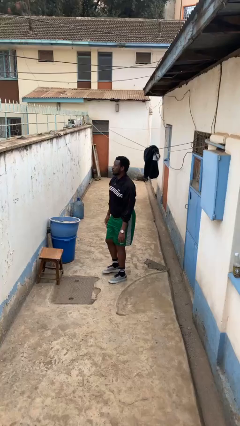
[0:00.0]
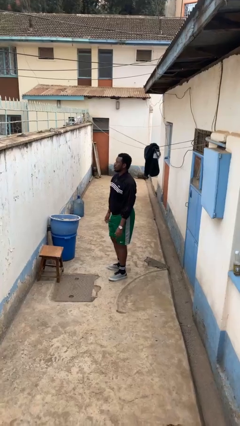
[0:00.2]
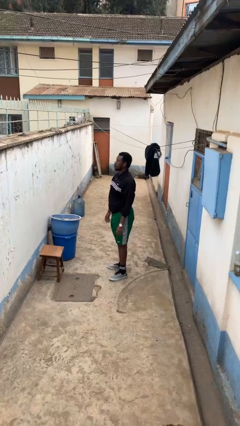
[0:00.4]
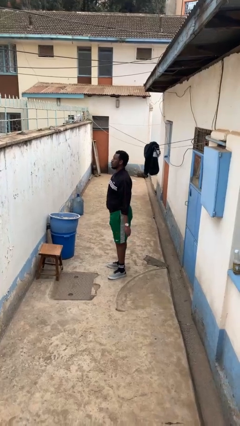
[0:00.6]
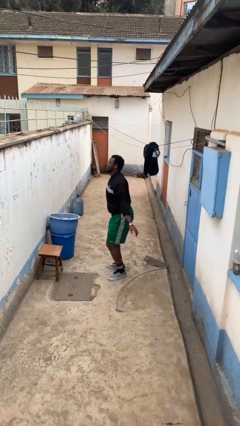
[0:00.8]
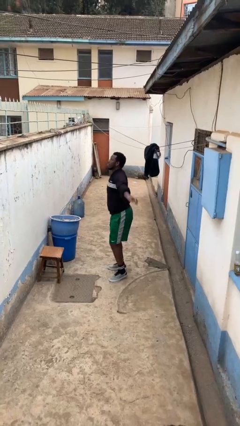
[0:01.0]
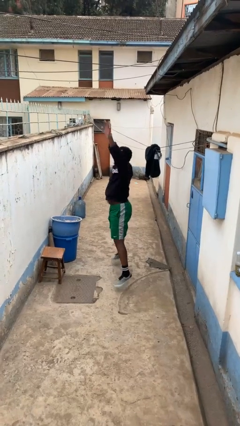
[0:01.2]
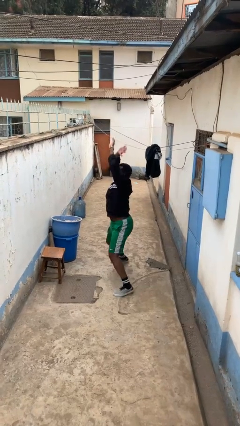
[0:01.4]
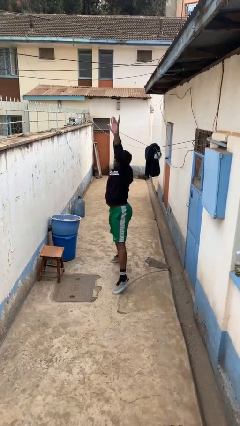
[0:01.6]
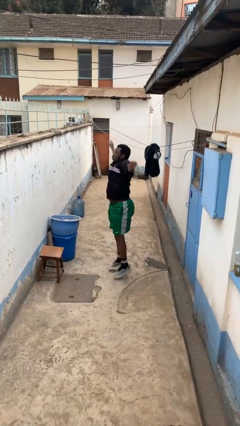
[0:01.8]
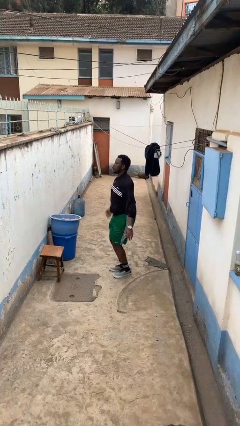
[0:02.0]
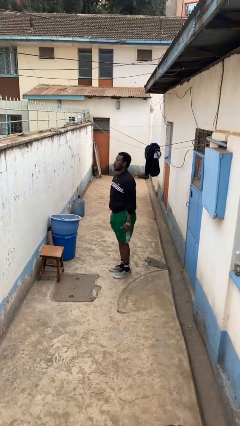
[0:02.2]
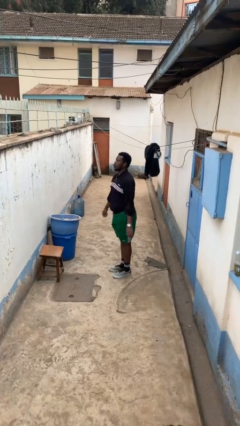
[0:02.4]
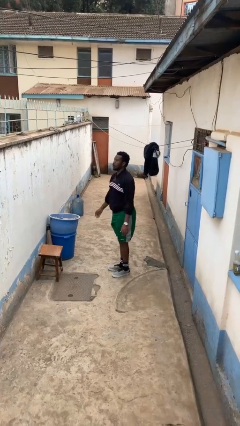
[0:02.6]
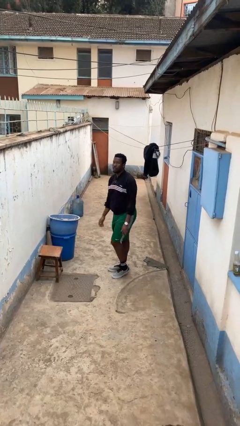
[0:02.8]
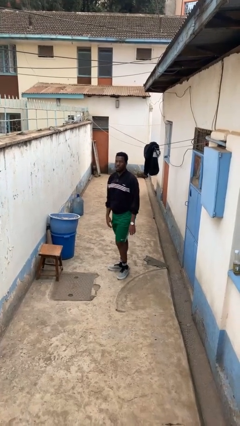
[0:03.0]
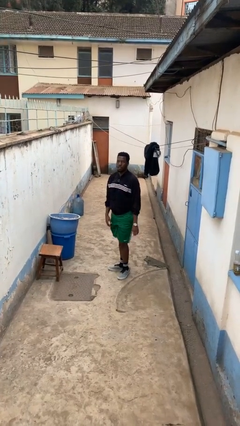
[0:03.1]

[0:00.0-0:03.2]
person exercises with jumping jacks

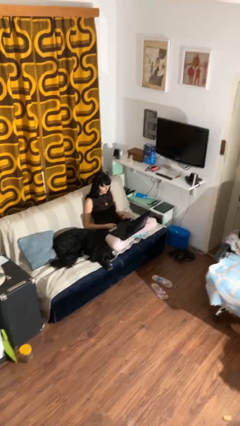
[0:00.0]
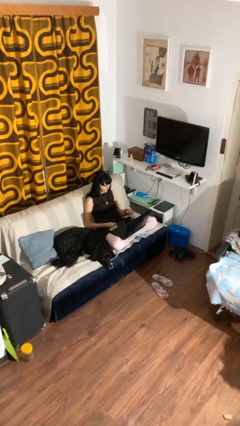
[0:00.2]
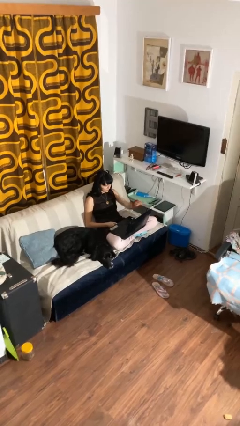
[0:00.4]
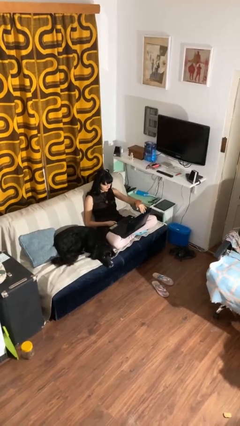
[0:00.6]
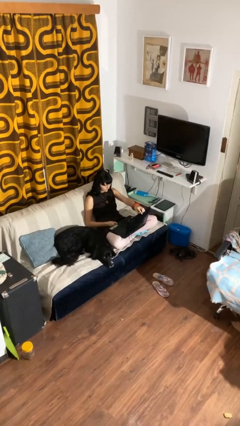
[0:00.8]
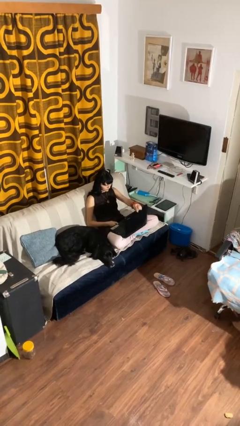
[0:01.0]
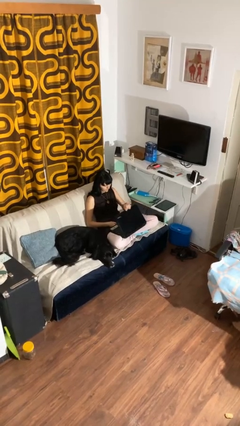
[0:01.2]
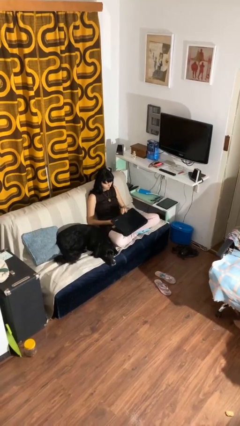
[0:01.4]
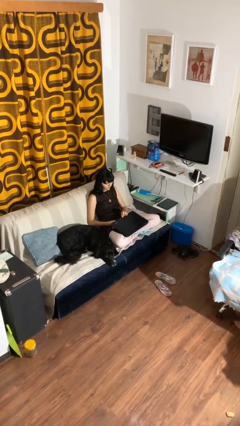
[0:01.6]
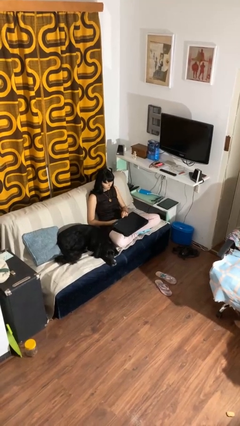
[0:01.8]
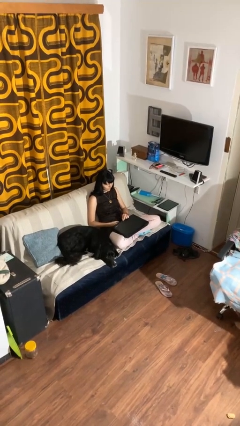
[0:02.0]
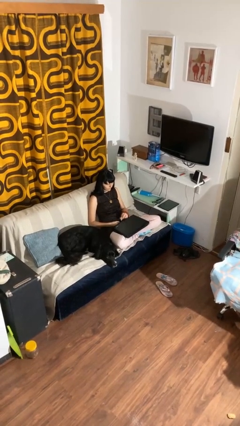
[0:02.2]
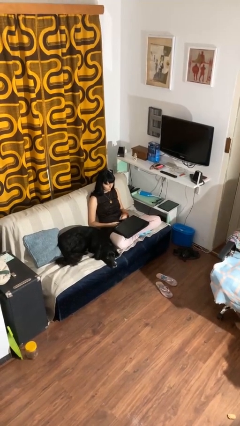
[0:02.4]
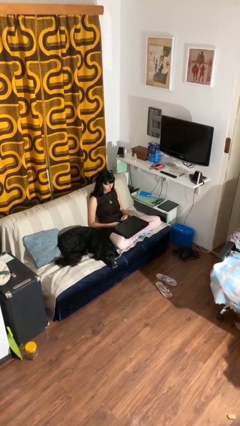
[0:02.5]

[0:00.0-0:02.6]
person closes laptop

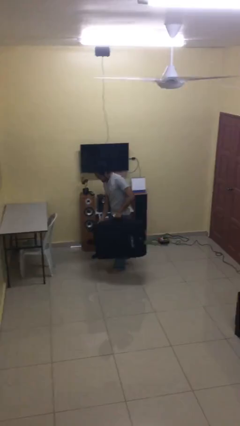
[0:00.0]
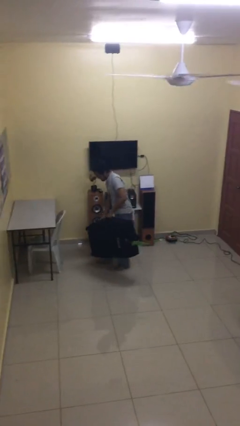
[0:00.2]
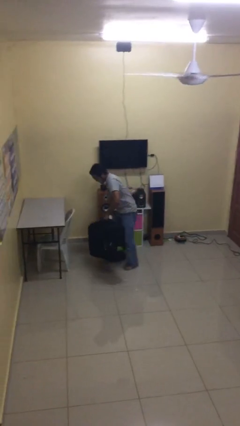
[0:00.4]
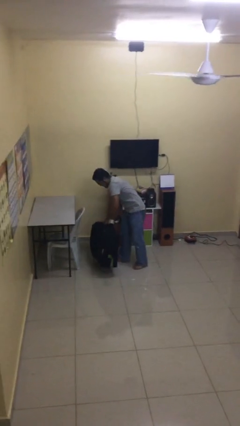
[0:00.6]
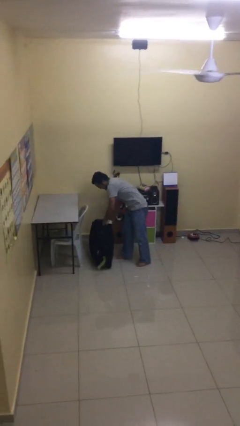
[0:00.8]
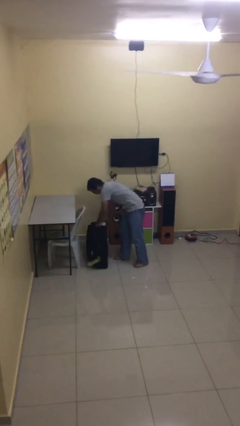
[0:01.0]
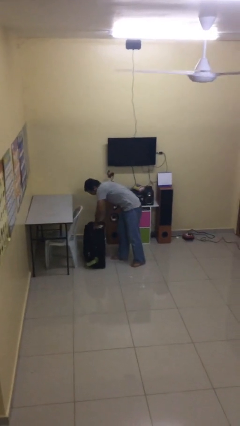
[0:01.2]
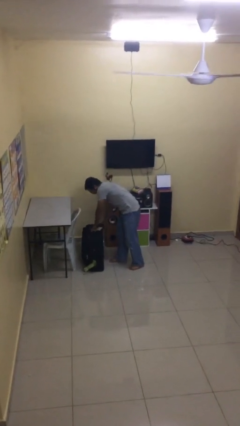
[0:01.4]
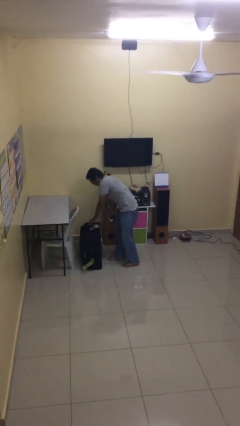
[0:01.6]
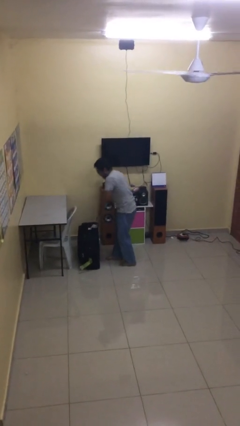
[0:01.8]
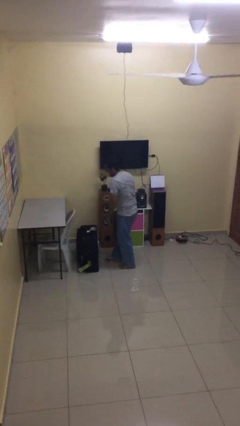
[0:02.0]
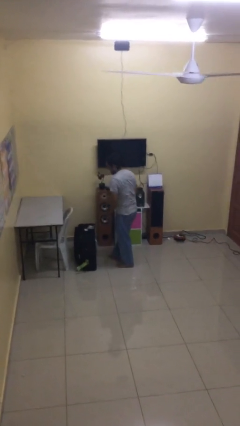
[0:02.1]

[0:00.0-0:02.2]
person puts down object on floor

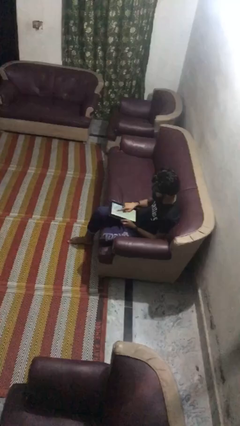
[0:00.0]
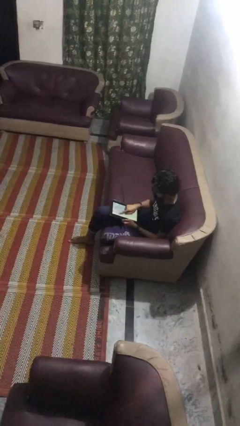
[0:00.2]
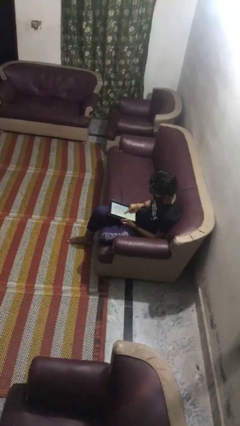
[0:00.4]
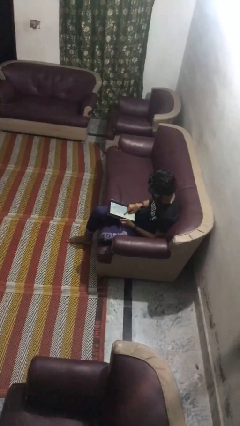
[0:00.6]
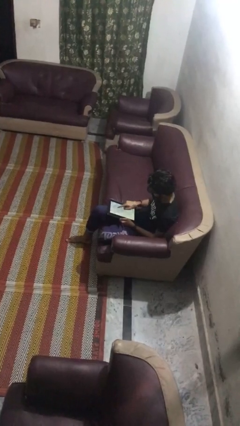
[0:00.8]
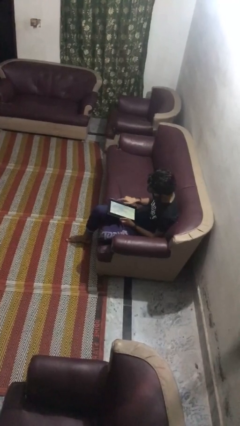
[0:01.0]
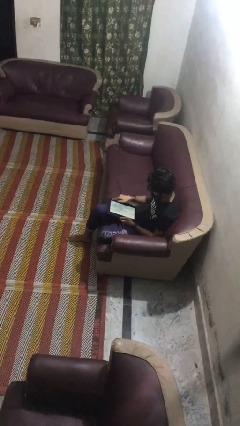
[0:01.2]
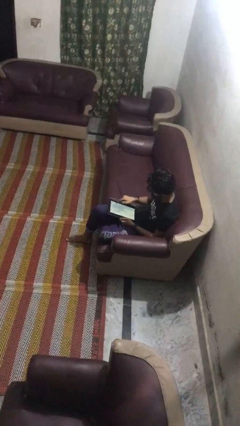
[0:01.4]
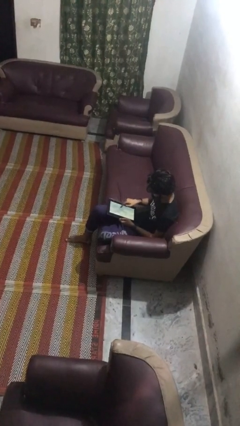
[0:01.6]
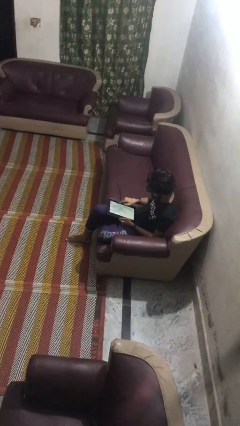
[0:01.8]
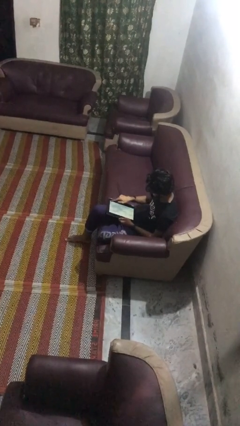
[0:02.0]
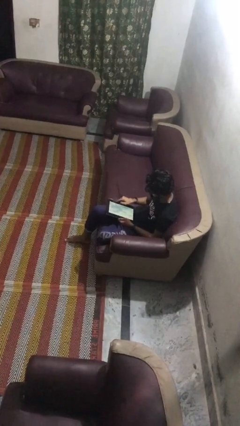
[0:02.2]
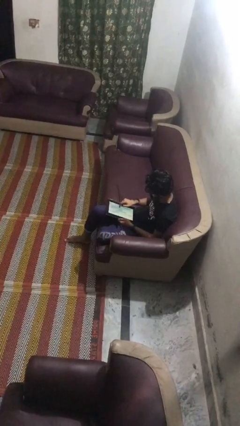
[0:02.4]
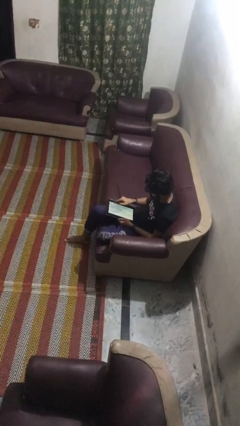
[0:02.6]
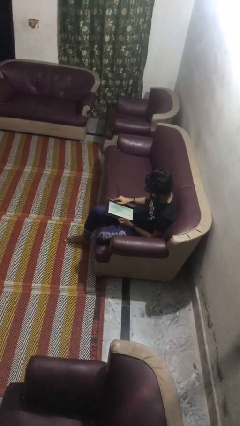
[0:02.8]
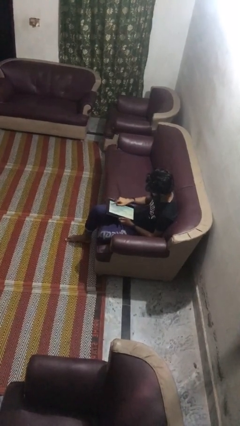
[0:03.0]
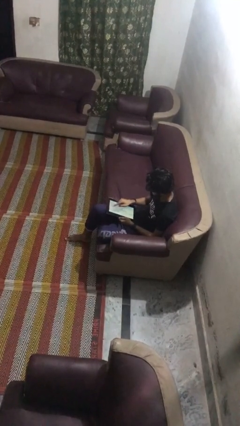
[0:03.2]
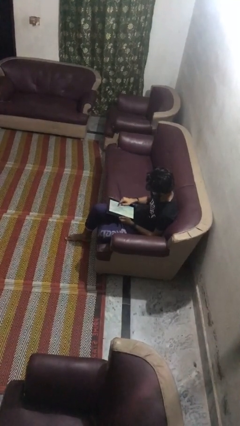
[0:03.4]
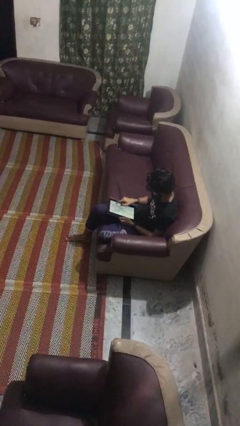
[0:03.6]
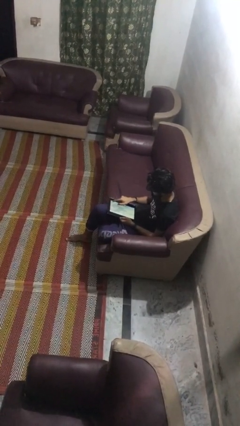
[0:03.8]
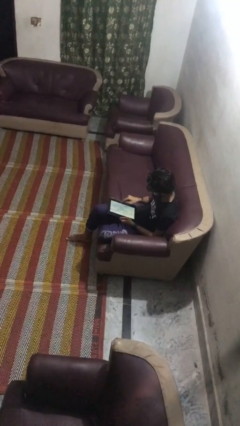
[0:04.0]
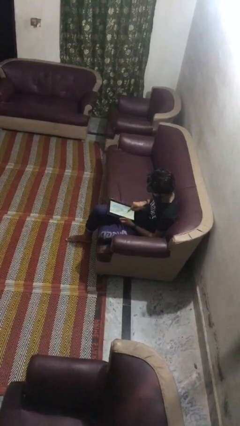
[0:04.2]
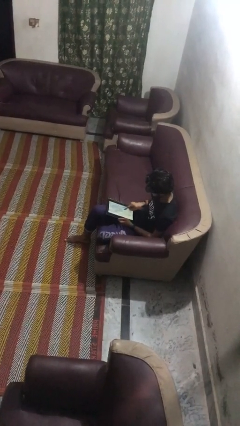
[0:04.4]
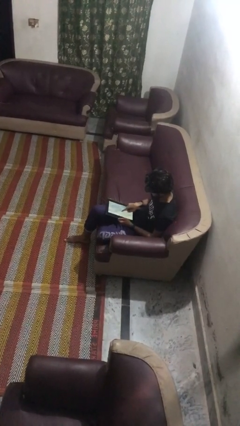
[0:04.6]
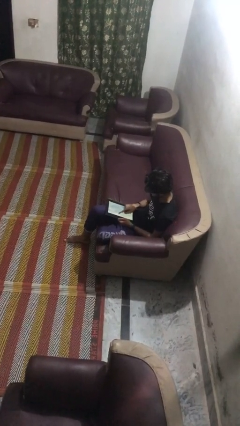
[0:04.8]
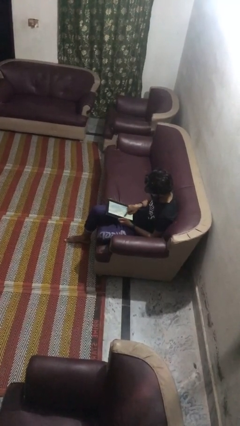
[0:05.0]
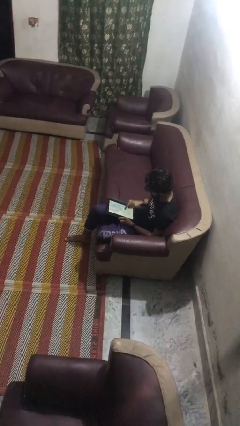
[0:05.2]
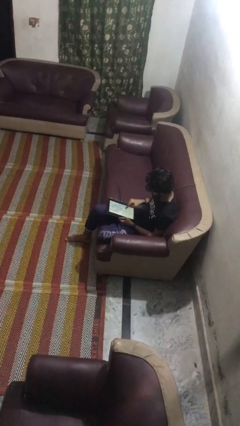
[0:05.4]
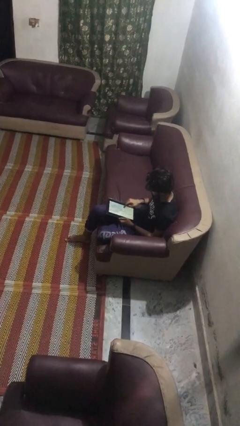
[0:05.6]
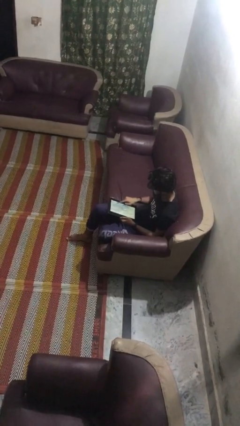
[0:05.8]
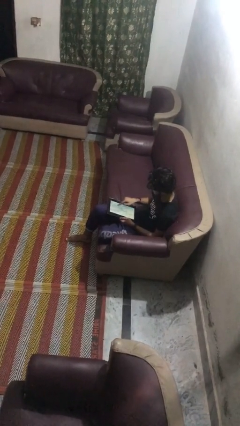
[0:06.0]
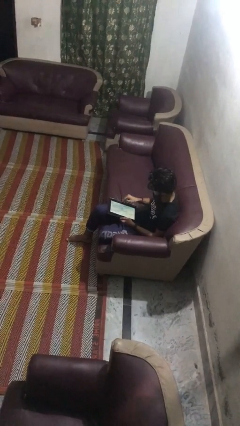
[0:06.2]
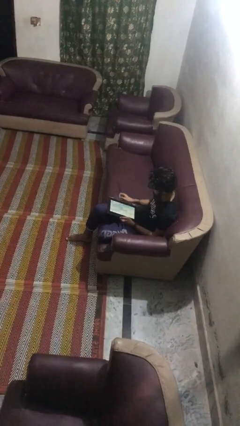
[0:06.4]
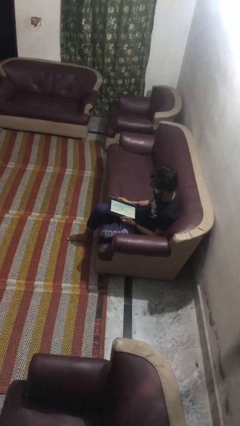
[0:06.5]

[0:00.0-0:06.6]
person interacts with tablet

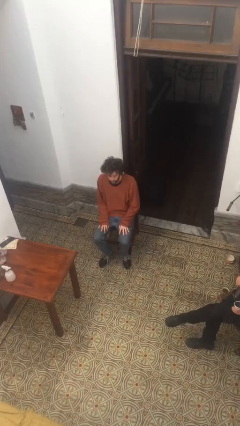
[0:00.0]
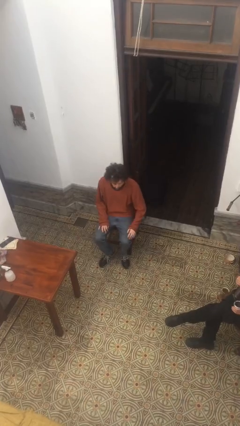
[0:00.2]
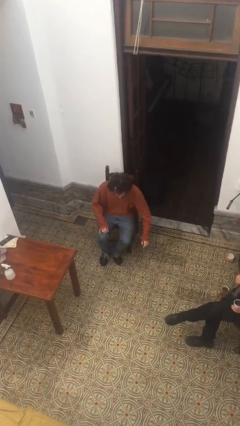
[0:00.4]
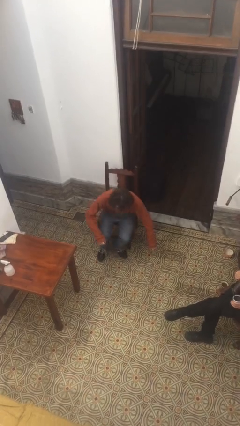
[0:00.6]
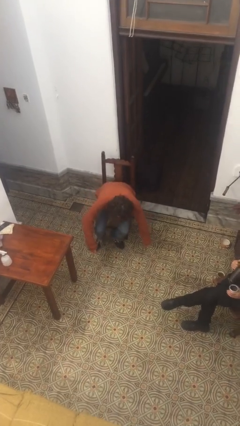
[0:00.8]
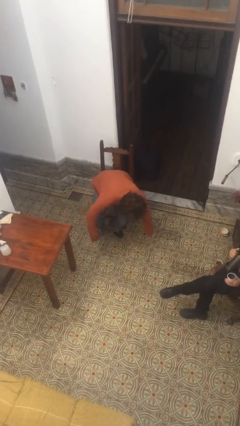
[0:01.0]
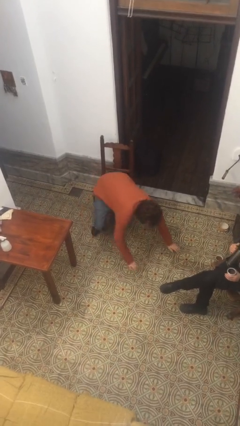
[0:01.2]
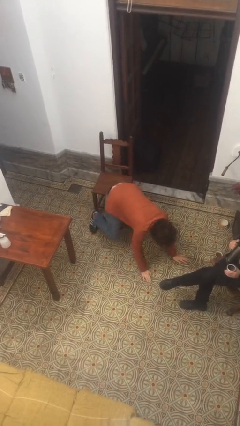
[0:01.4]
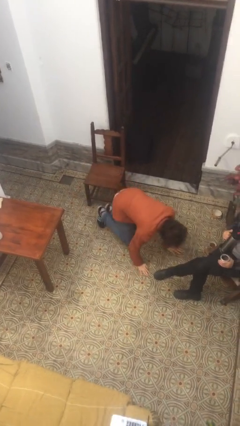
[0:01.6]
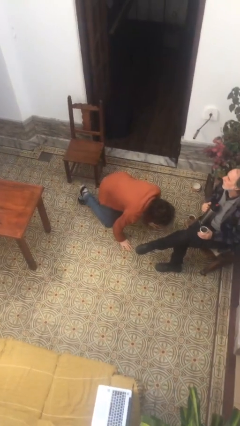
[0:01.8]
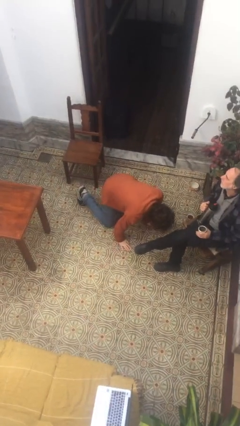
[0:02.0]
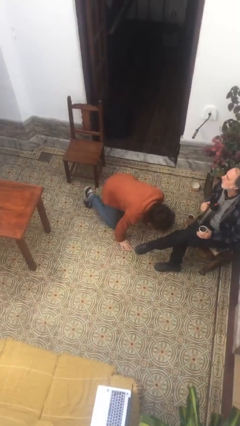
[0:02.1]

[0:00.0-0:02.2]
person falls from chair

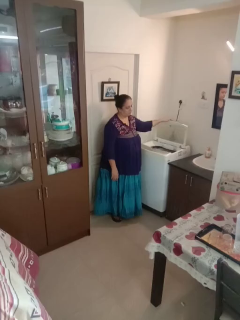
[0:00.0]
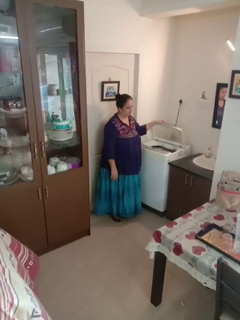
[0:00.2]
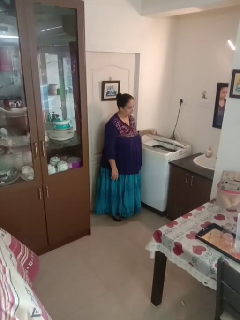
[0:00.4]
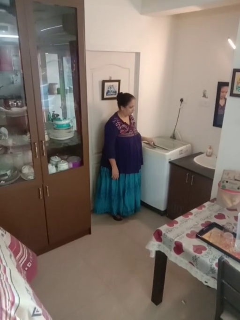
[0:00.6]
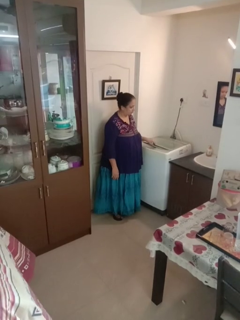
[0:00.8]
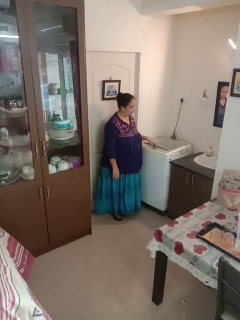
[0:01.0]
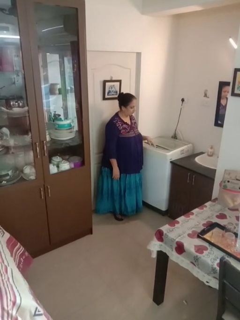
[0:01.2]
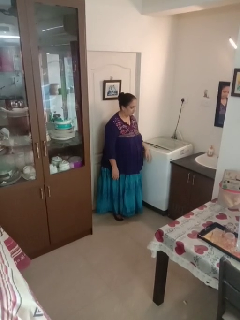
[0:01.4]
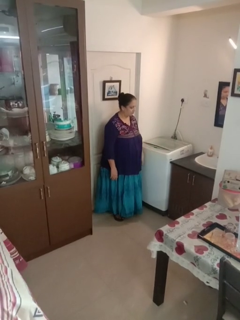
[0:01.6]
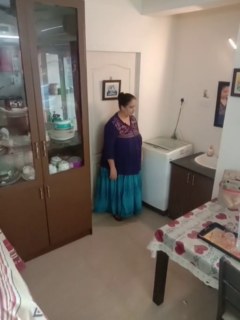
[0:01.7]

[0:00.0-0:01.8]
person closes clothes washer
